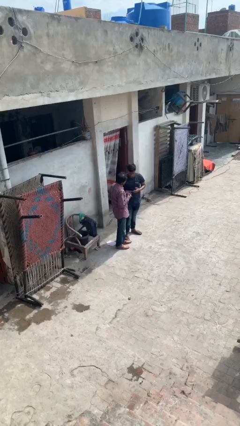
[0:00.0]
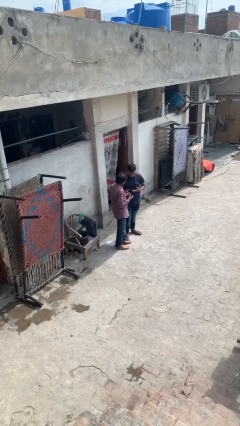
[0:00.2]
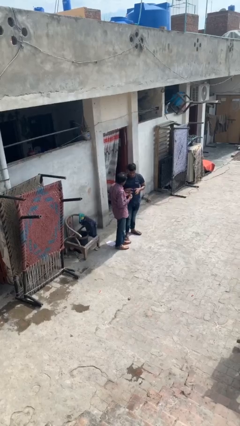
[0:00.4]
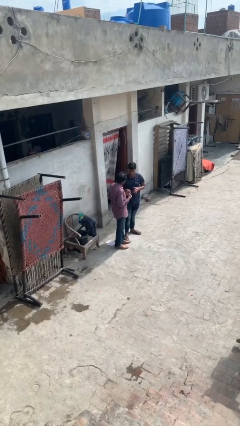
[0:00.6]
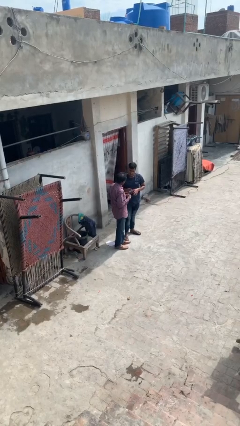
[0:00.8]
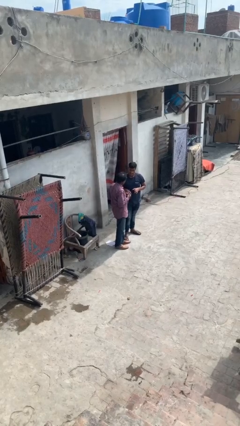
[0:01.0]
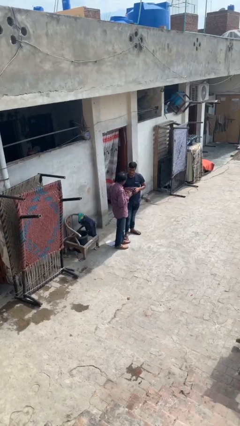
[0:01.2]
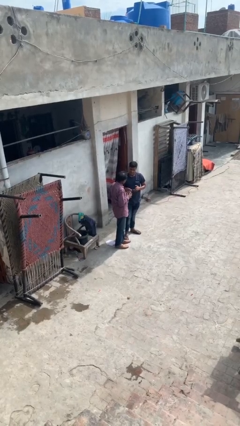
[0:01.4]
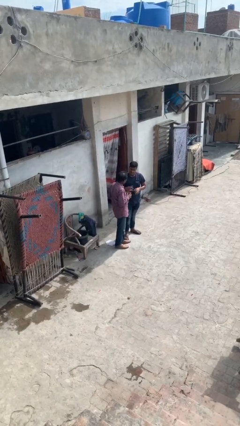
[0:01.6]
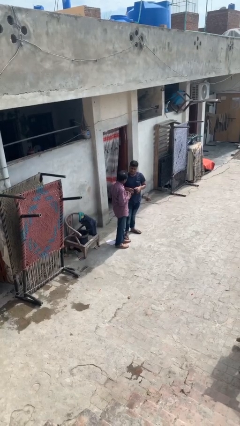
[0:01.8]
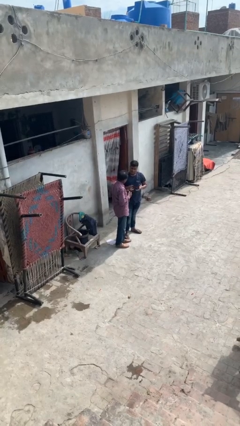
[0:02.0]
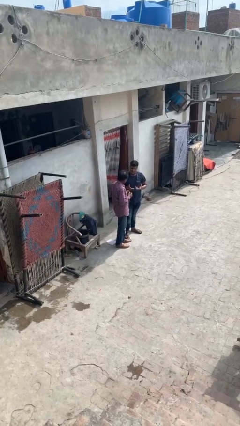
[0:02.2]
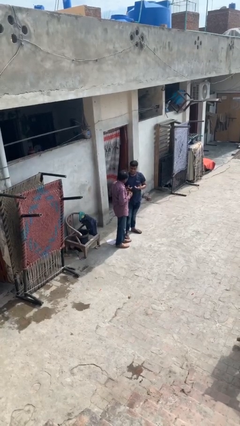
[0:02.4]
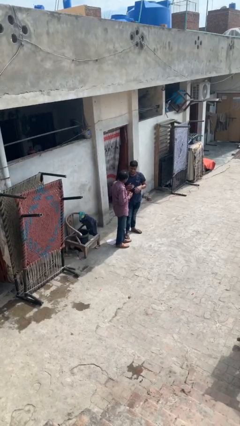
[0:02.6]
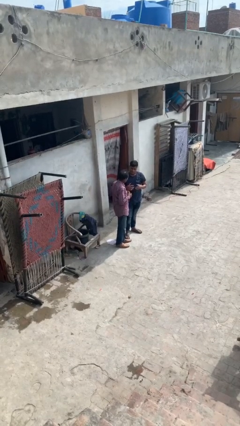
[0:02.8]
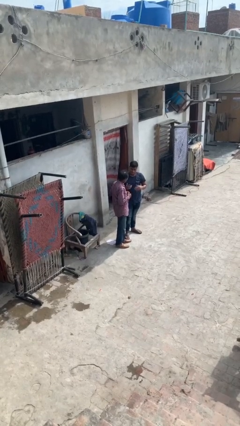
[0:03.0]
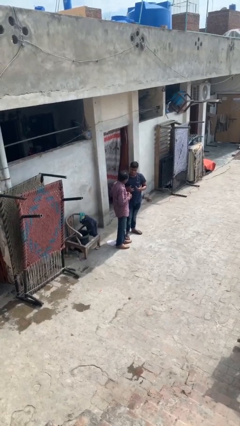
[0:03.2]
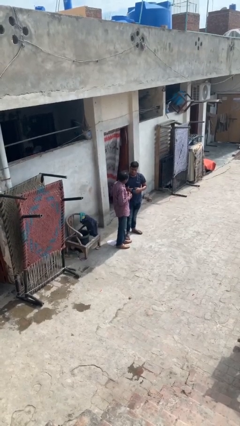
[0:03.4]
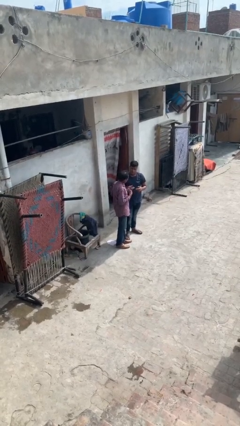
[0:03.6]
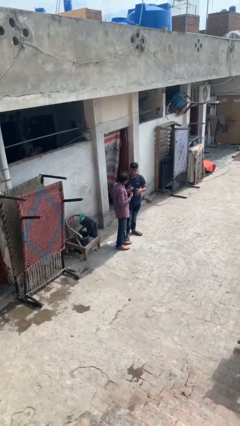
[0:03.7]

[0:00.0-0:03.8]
person talks to person

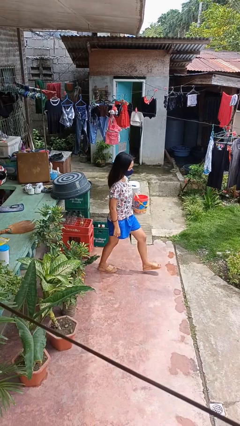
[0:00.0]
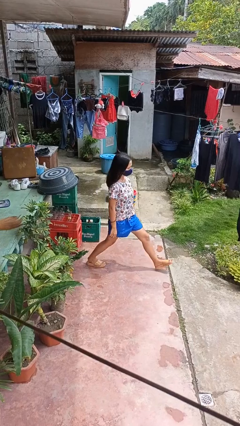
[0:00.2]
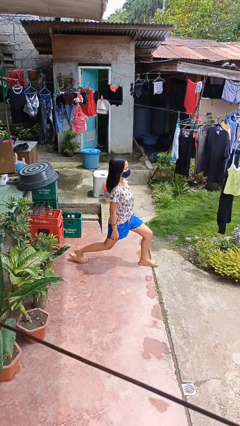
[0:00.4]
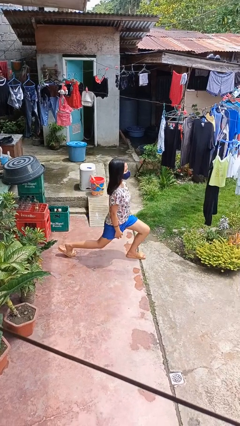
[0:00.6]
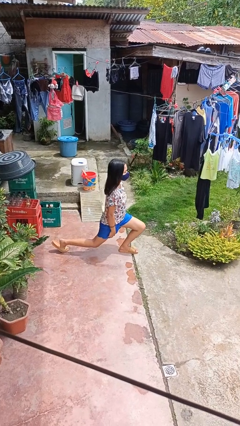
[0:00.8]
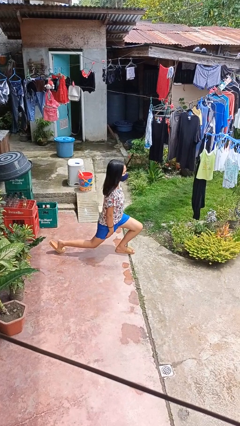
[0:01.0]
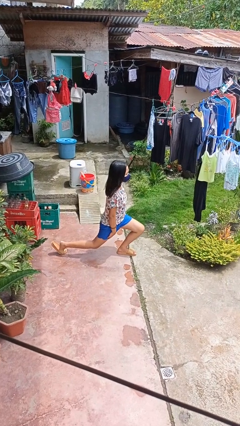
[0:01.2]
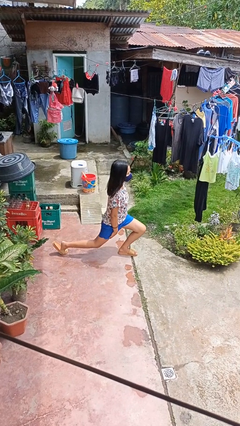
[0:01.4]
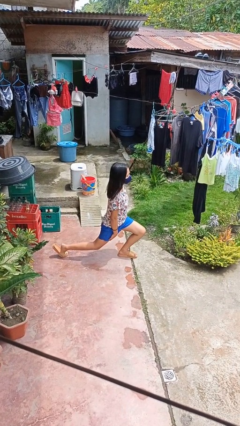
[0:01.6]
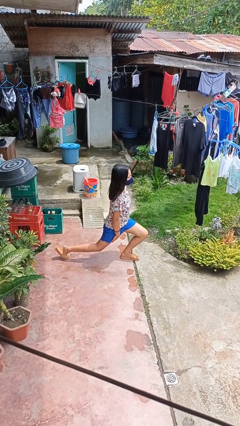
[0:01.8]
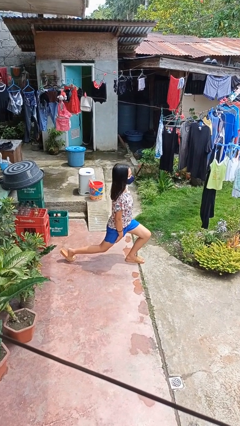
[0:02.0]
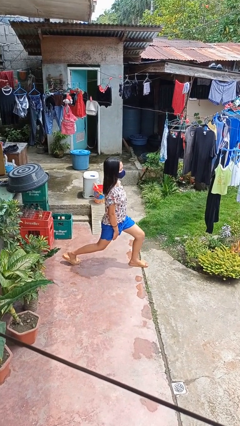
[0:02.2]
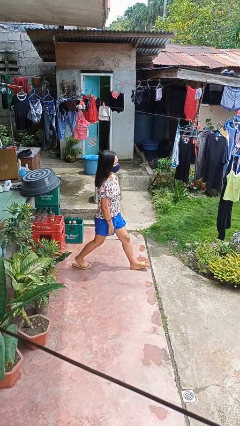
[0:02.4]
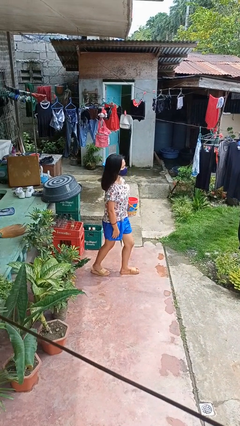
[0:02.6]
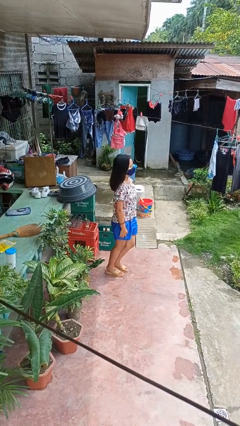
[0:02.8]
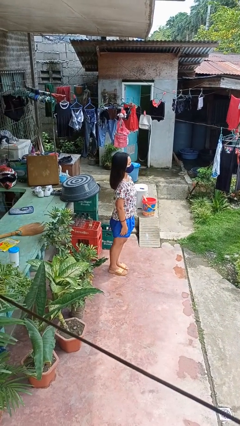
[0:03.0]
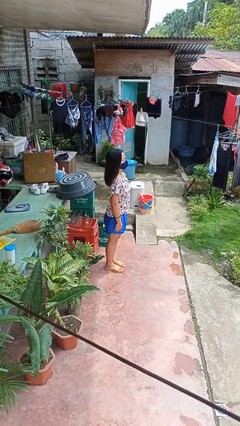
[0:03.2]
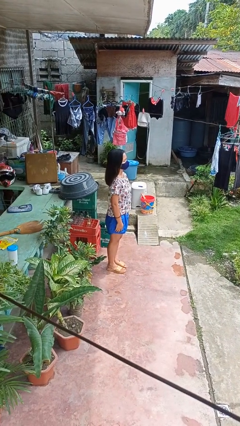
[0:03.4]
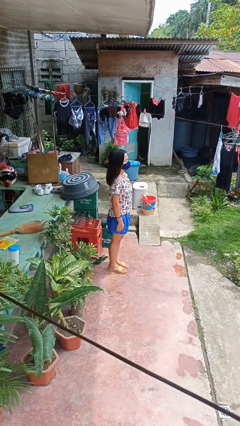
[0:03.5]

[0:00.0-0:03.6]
person exercises with lunges

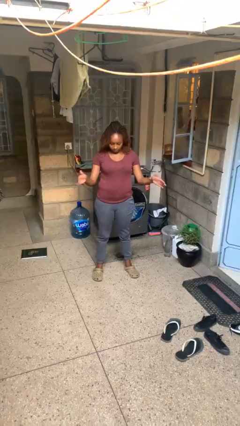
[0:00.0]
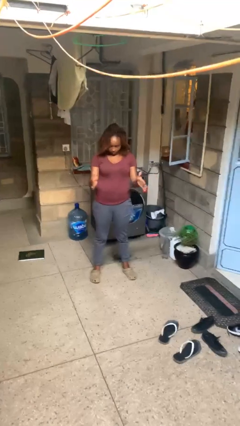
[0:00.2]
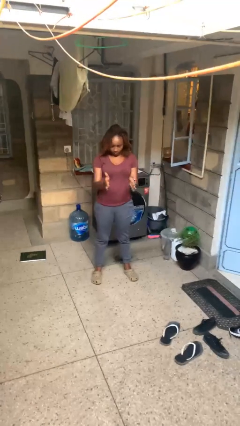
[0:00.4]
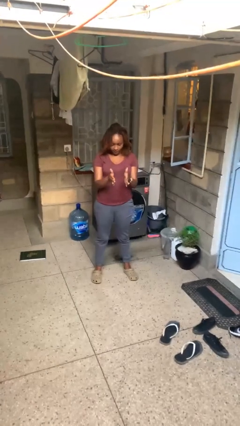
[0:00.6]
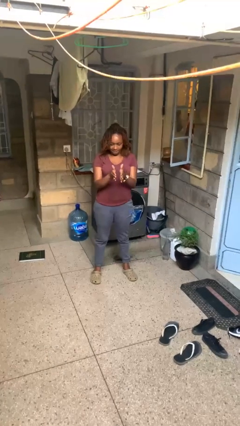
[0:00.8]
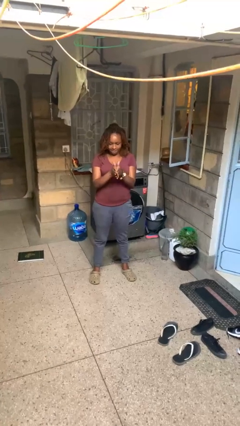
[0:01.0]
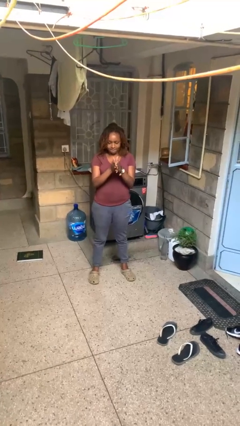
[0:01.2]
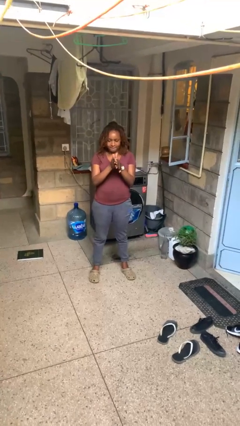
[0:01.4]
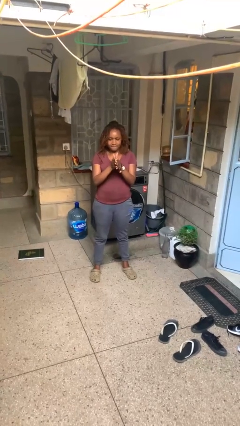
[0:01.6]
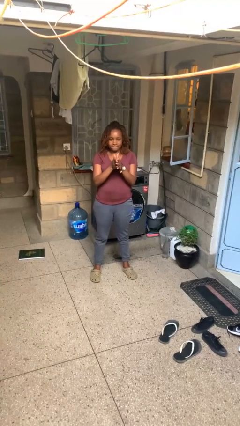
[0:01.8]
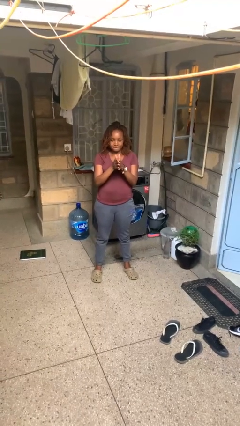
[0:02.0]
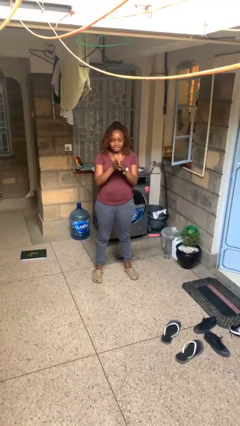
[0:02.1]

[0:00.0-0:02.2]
person gestures zoom in

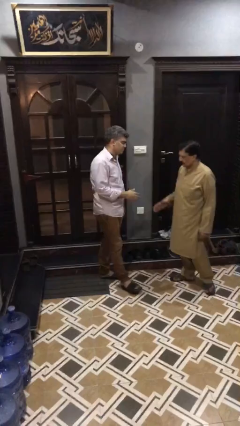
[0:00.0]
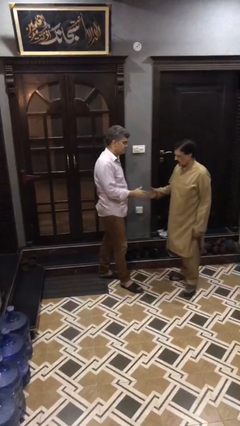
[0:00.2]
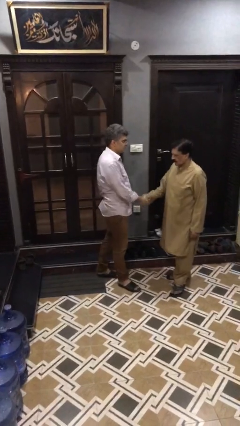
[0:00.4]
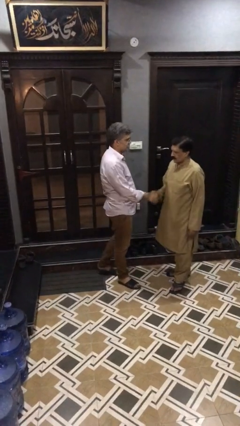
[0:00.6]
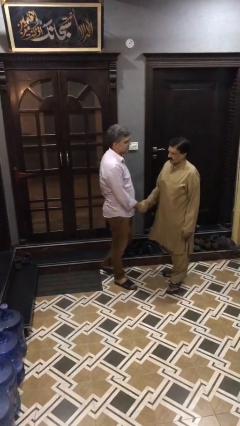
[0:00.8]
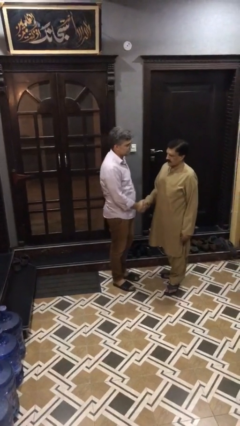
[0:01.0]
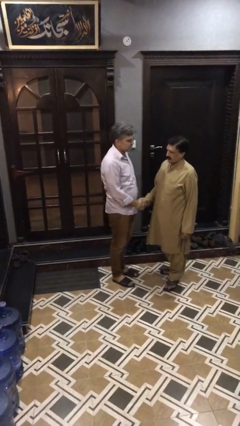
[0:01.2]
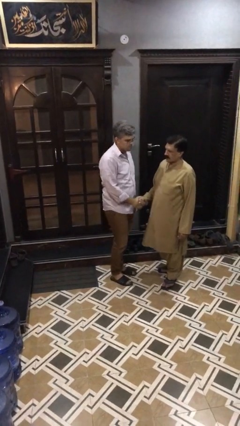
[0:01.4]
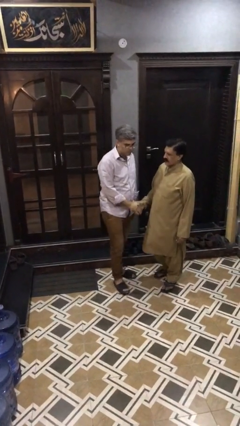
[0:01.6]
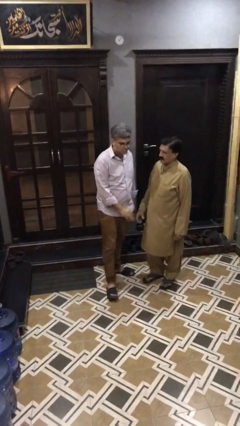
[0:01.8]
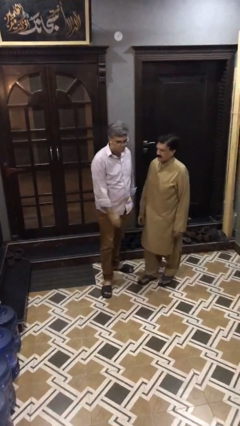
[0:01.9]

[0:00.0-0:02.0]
person shakes hand

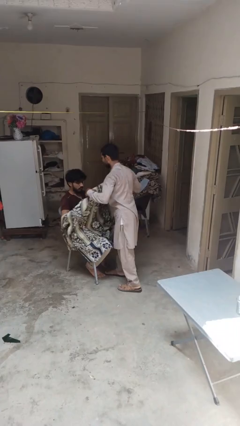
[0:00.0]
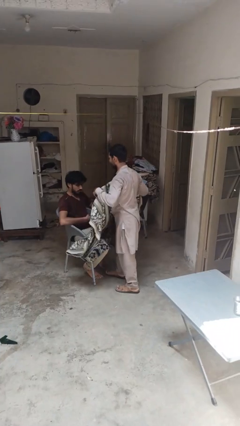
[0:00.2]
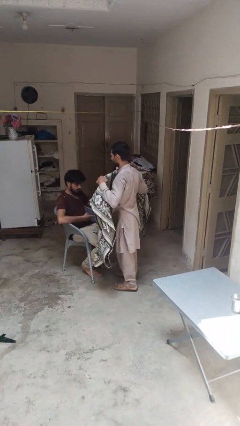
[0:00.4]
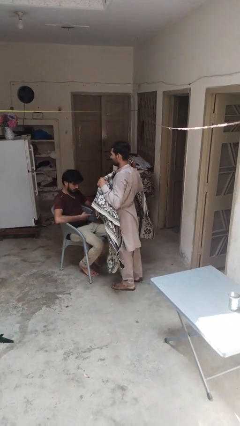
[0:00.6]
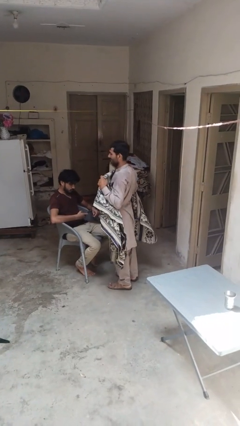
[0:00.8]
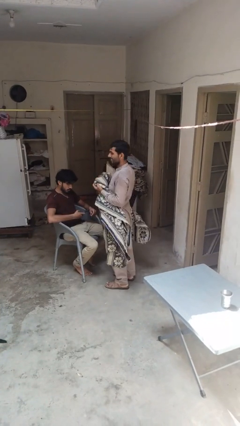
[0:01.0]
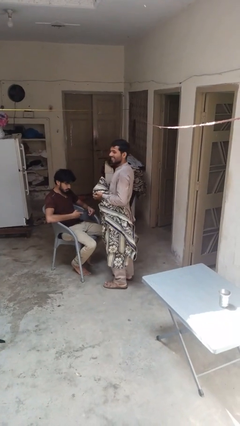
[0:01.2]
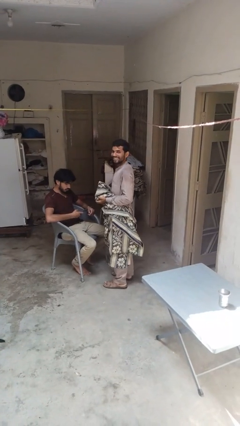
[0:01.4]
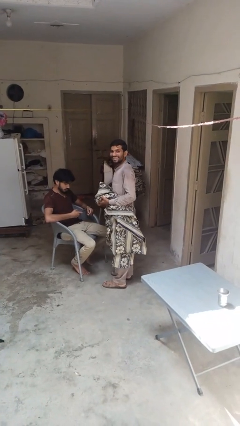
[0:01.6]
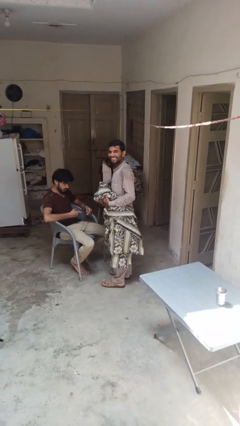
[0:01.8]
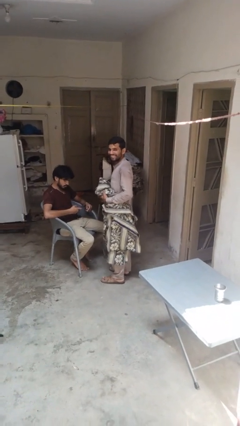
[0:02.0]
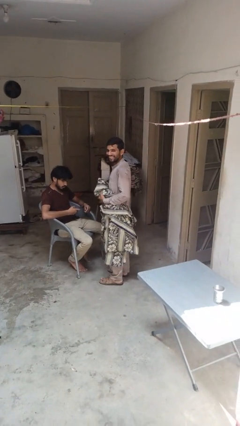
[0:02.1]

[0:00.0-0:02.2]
person uncovers friend with blanket

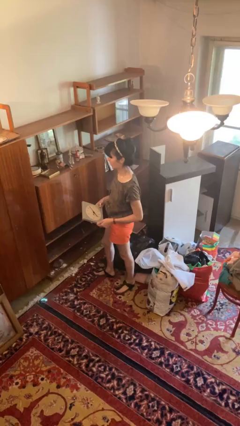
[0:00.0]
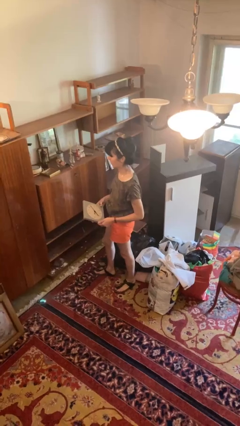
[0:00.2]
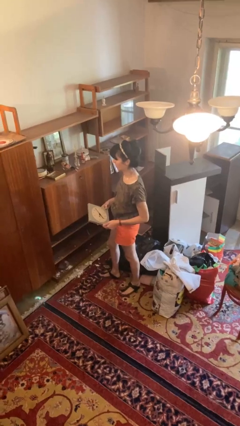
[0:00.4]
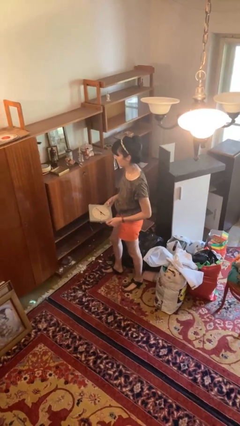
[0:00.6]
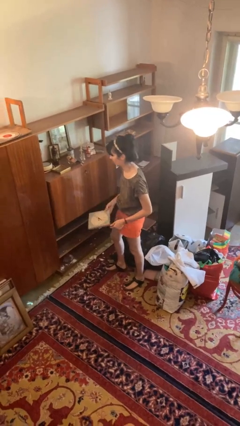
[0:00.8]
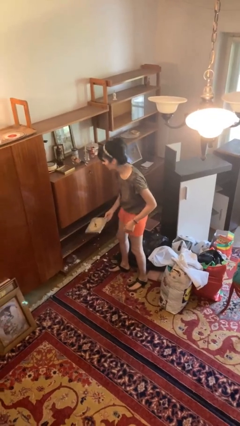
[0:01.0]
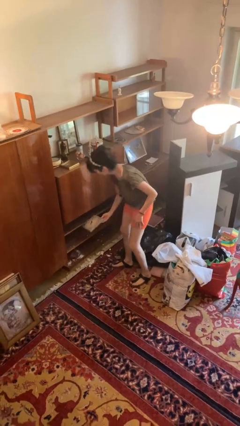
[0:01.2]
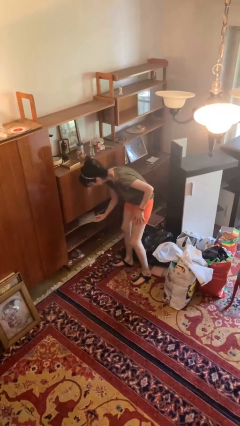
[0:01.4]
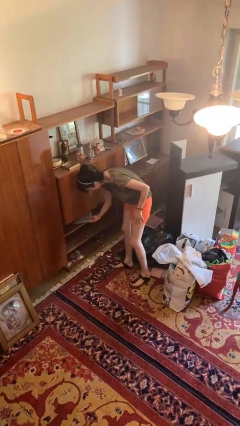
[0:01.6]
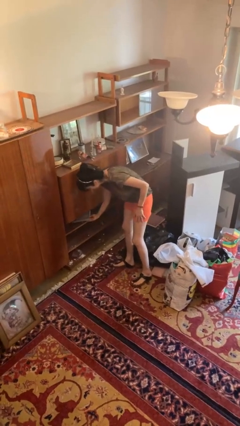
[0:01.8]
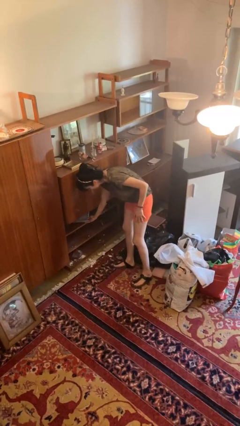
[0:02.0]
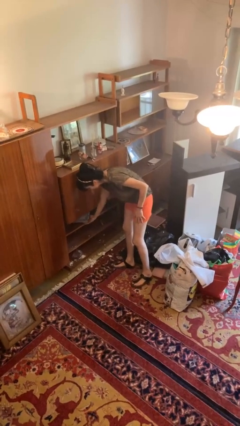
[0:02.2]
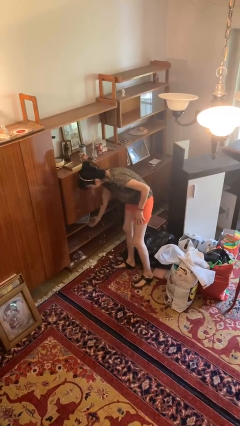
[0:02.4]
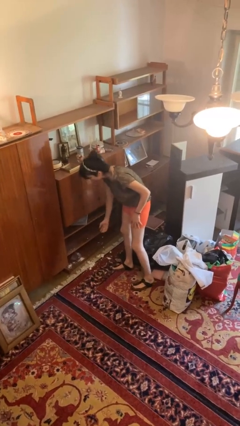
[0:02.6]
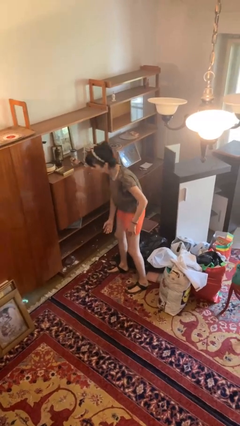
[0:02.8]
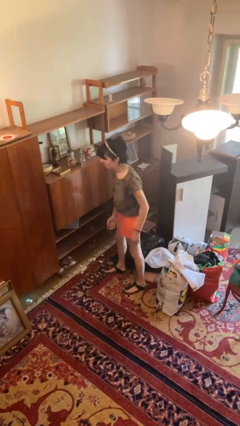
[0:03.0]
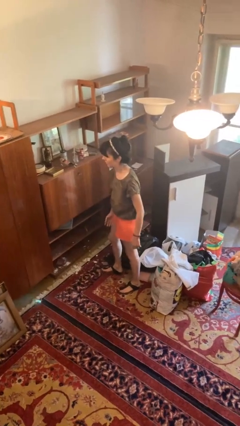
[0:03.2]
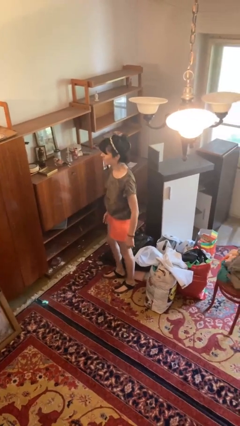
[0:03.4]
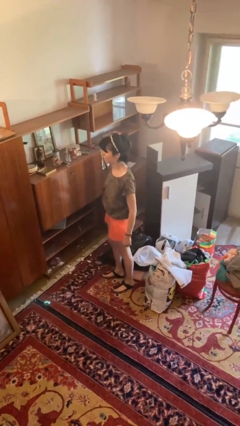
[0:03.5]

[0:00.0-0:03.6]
person puts down object into cabinet
